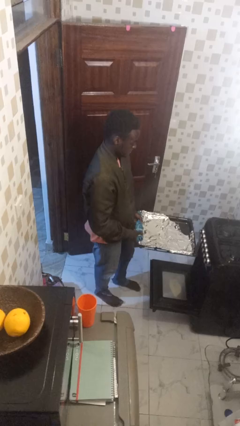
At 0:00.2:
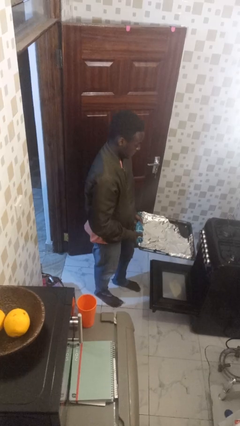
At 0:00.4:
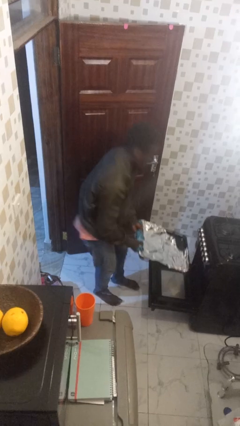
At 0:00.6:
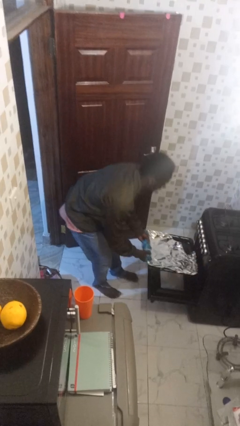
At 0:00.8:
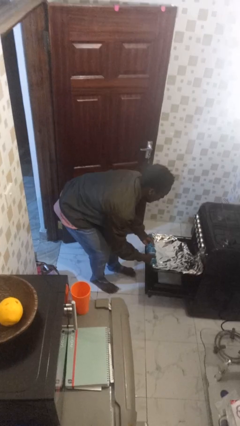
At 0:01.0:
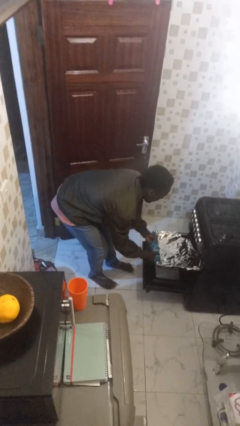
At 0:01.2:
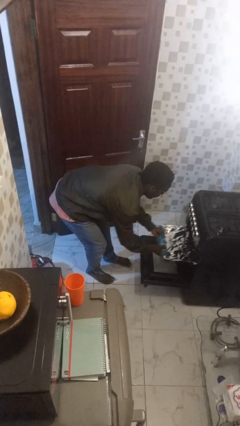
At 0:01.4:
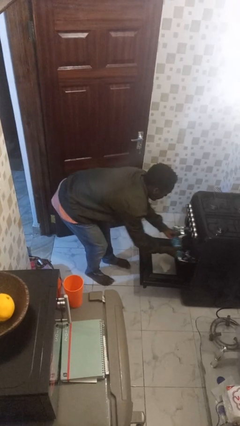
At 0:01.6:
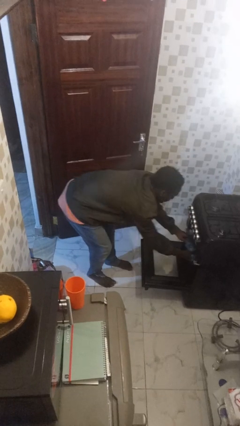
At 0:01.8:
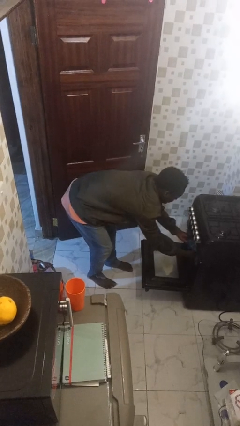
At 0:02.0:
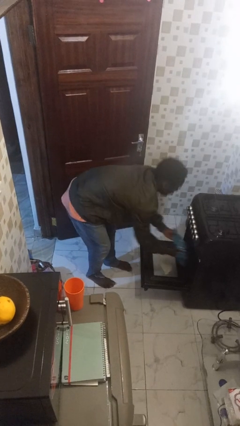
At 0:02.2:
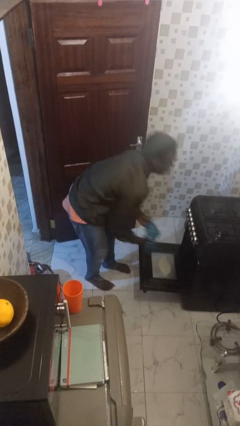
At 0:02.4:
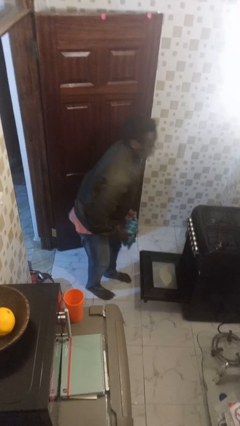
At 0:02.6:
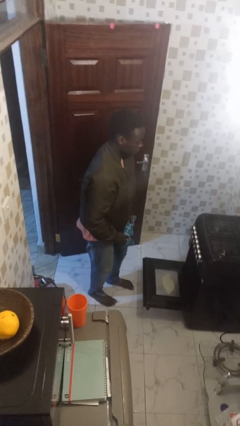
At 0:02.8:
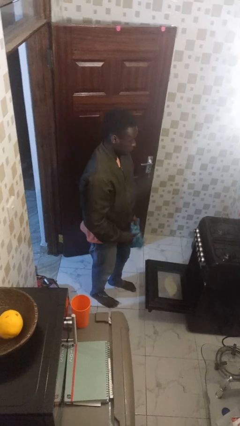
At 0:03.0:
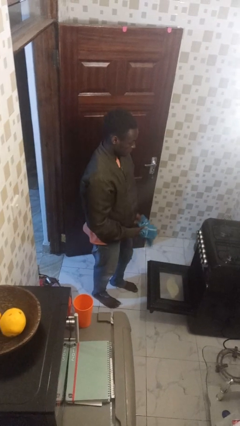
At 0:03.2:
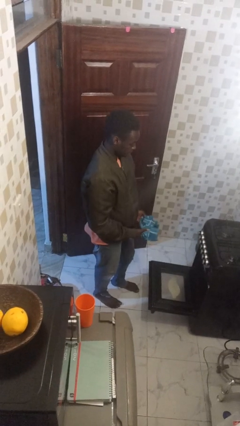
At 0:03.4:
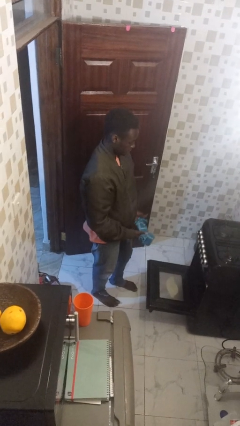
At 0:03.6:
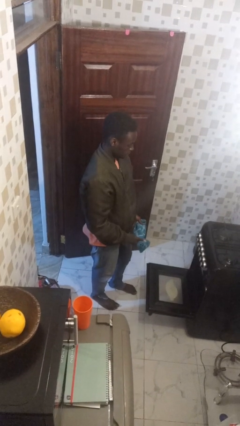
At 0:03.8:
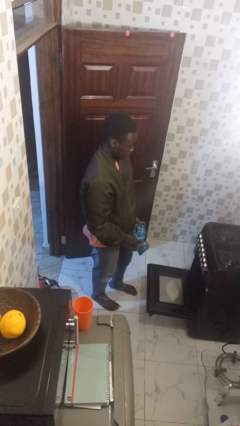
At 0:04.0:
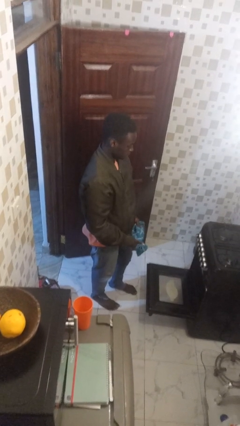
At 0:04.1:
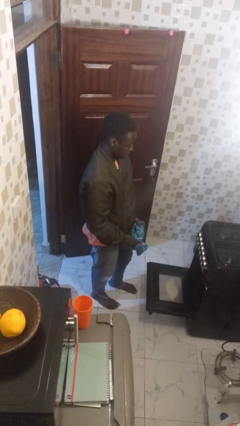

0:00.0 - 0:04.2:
person puts object into oven

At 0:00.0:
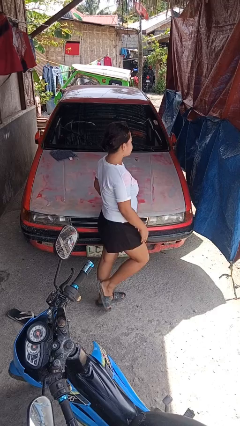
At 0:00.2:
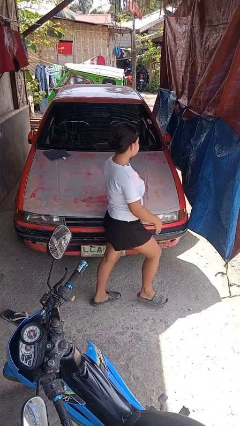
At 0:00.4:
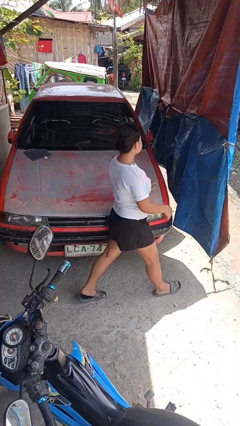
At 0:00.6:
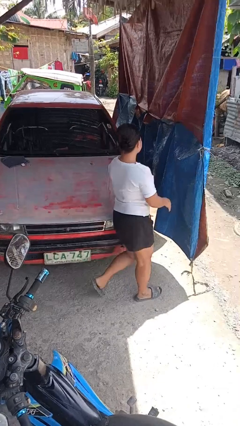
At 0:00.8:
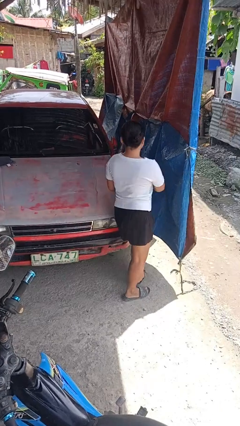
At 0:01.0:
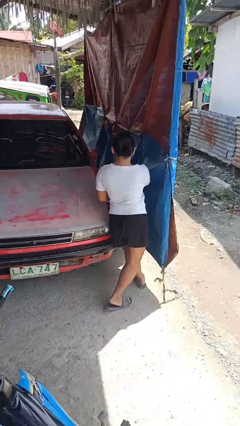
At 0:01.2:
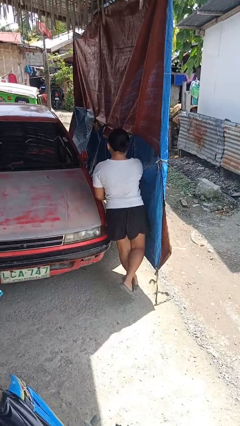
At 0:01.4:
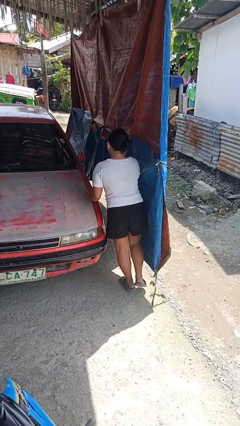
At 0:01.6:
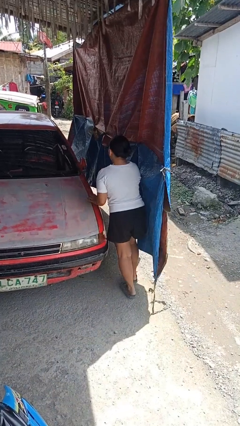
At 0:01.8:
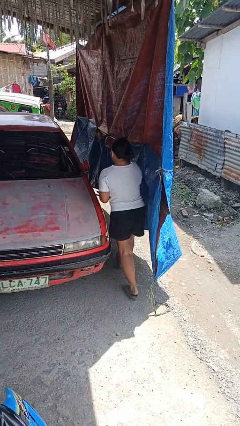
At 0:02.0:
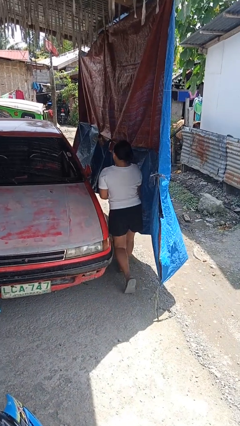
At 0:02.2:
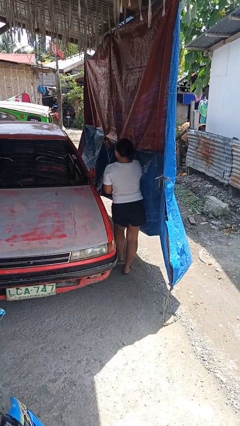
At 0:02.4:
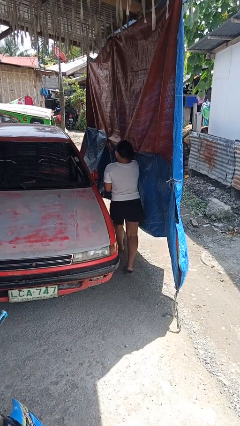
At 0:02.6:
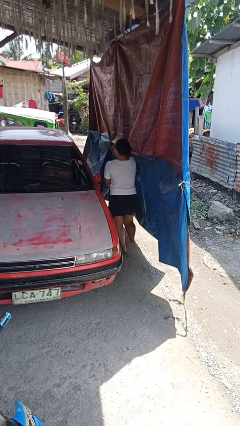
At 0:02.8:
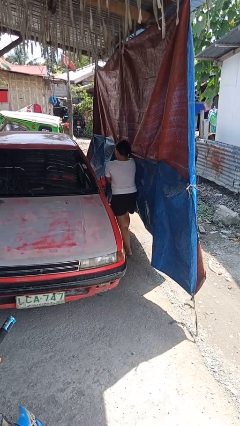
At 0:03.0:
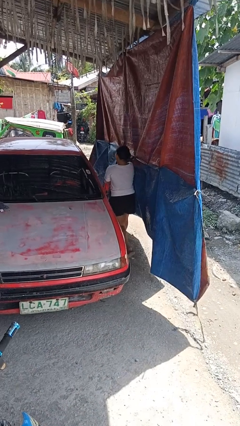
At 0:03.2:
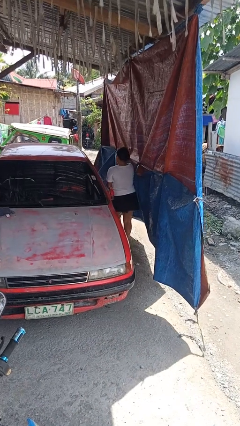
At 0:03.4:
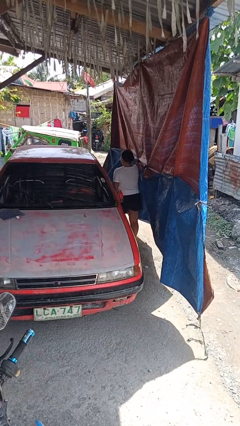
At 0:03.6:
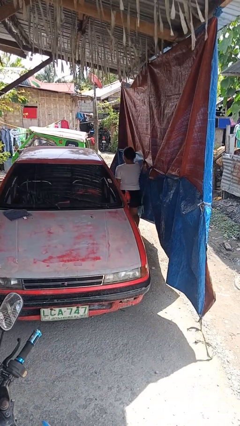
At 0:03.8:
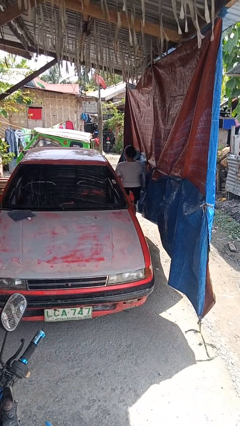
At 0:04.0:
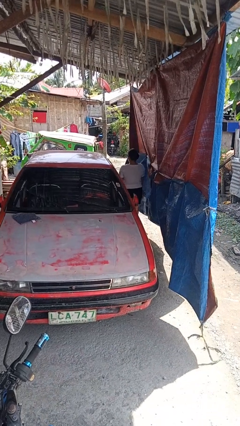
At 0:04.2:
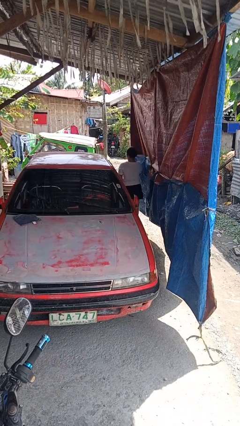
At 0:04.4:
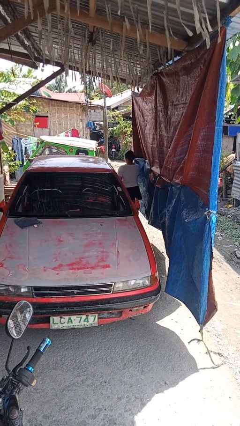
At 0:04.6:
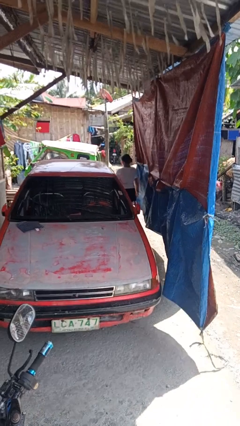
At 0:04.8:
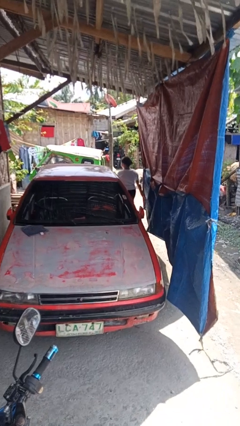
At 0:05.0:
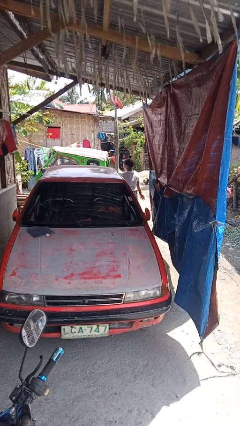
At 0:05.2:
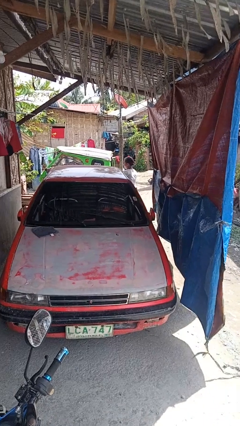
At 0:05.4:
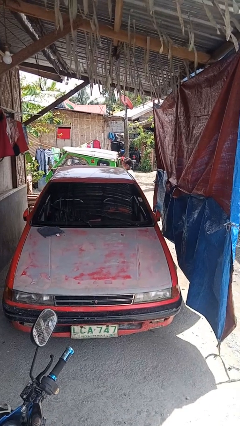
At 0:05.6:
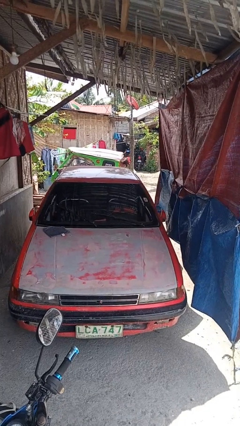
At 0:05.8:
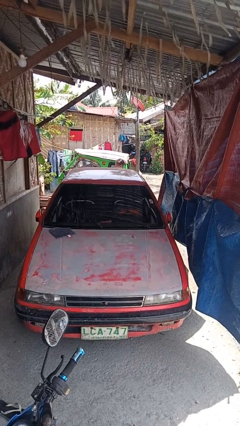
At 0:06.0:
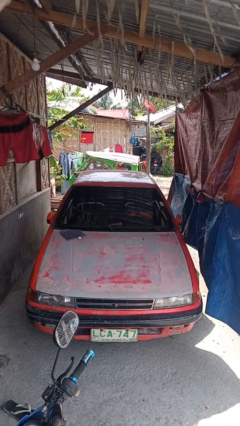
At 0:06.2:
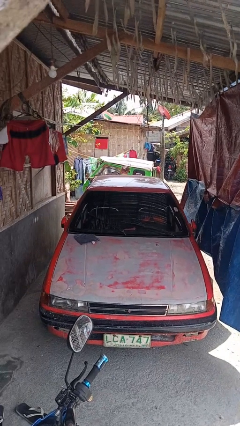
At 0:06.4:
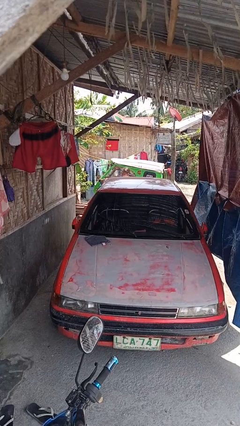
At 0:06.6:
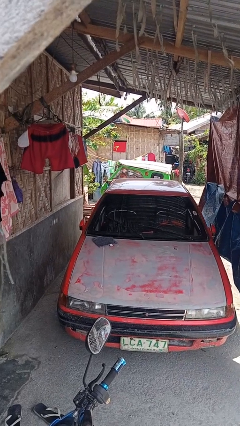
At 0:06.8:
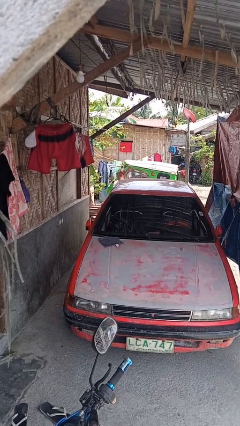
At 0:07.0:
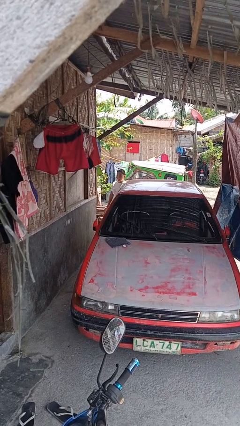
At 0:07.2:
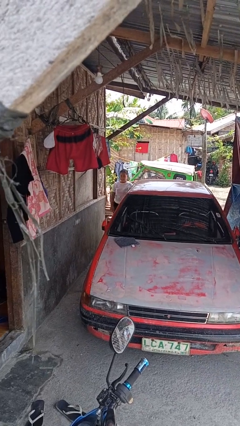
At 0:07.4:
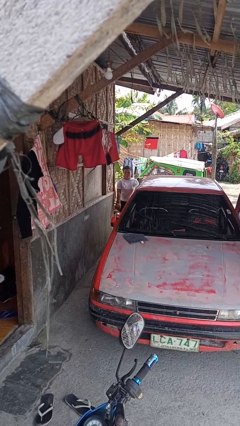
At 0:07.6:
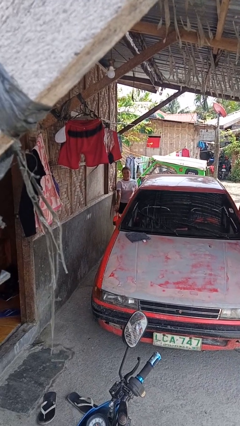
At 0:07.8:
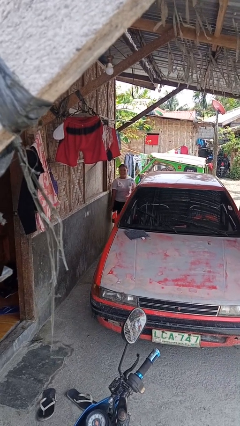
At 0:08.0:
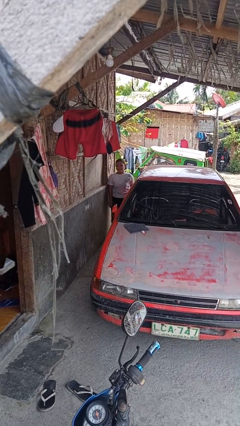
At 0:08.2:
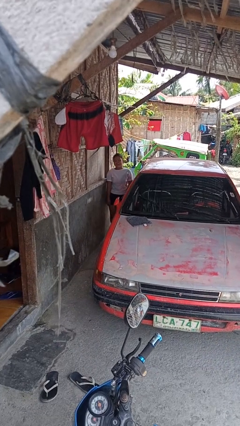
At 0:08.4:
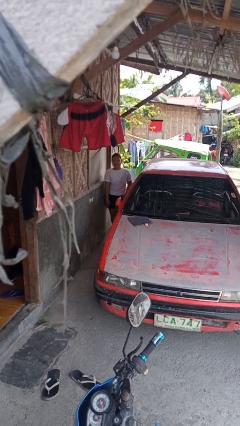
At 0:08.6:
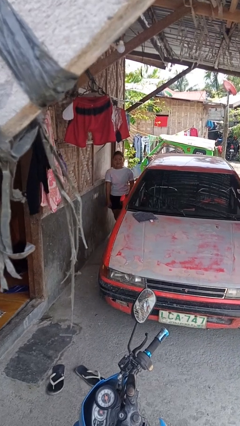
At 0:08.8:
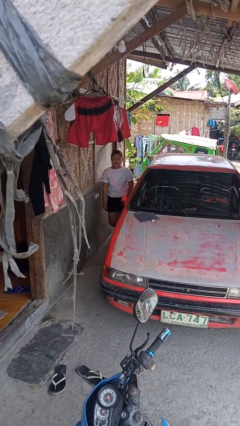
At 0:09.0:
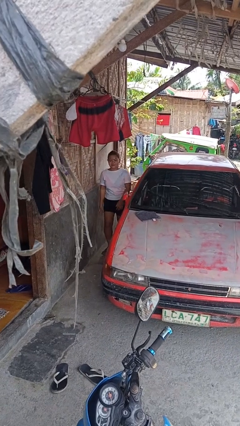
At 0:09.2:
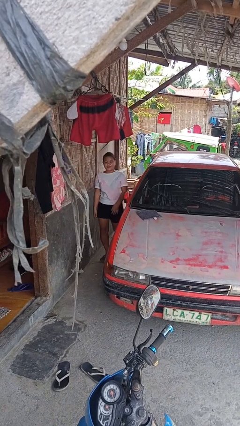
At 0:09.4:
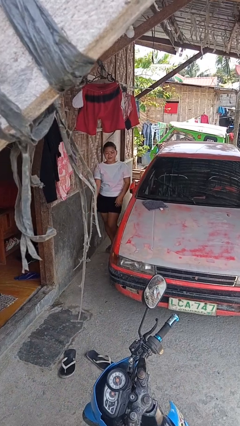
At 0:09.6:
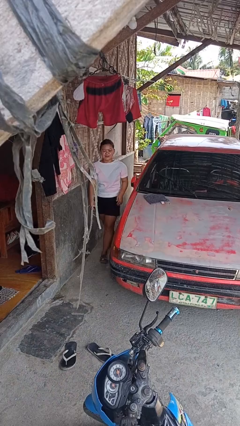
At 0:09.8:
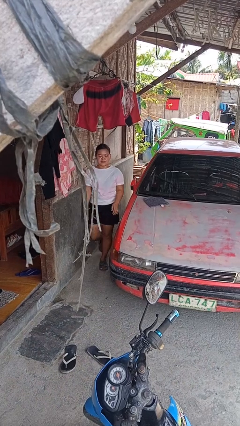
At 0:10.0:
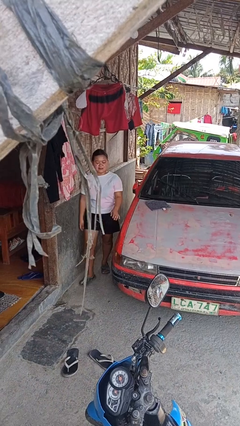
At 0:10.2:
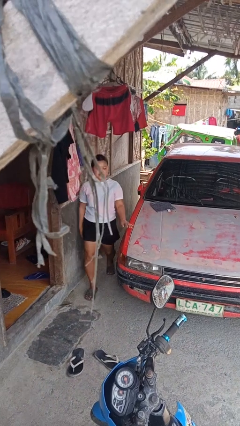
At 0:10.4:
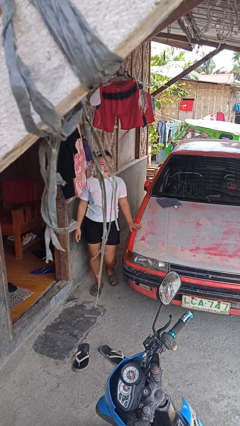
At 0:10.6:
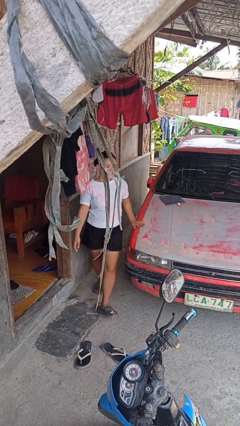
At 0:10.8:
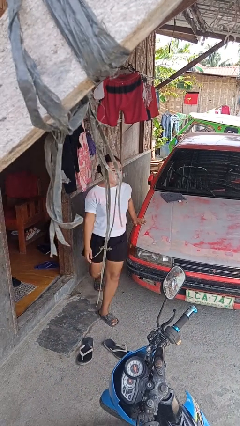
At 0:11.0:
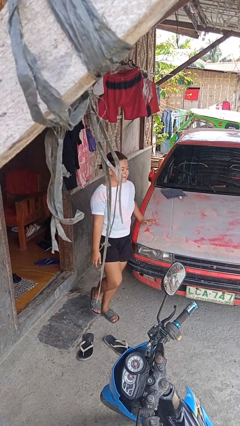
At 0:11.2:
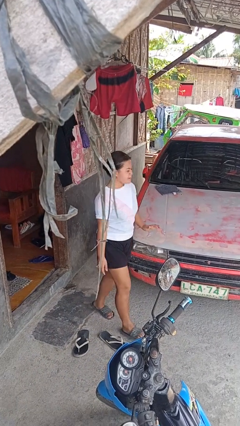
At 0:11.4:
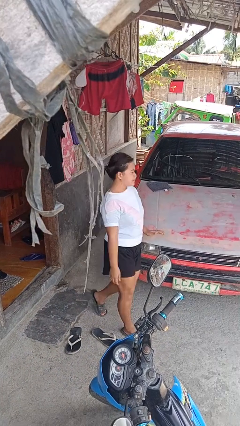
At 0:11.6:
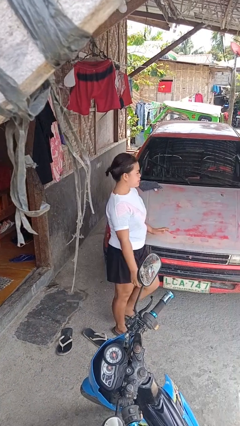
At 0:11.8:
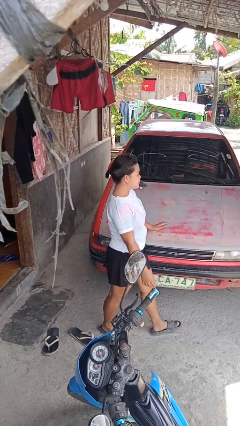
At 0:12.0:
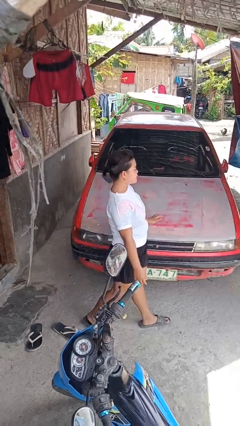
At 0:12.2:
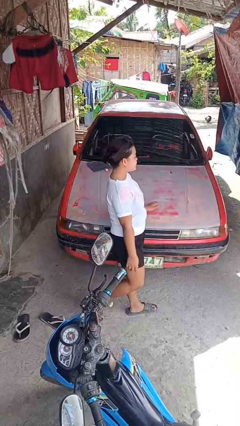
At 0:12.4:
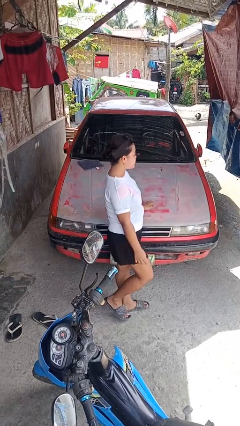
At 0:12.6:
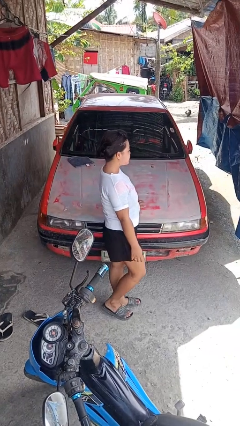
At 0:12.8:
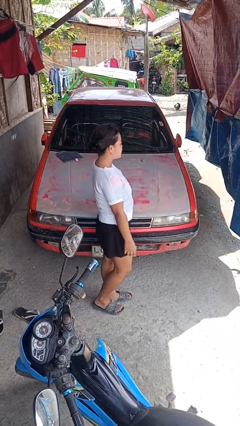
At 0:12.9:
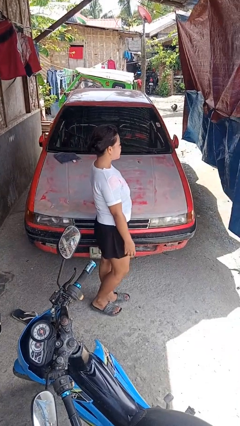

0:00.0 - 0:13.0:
person walks around car

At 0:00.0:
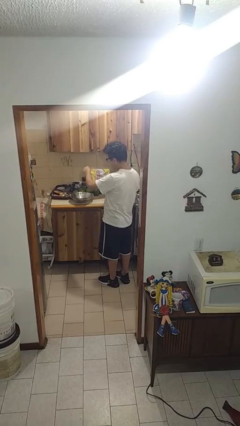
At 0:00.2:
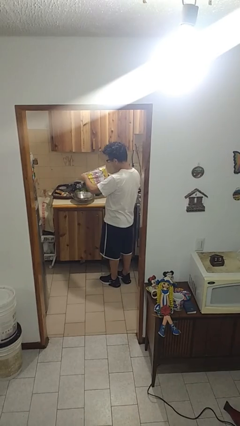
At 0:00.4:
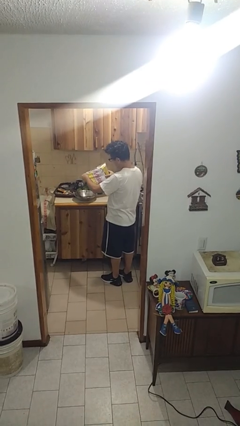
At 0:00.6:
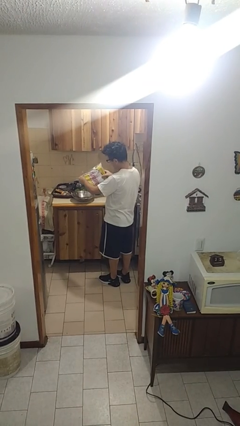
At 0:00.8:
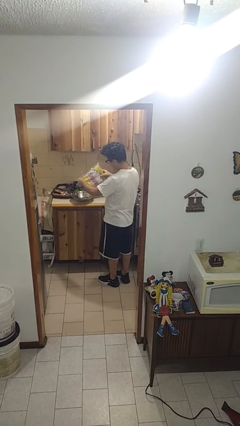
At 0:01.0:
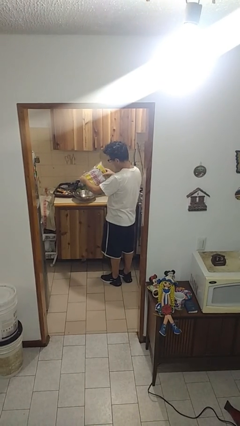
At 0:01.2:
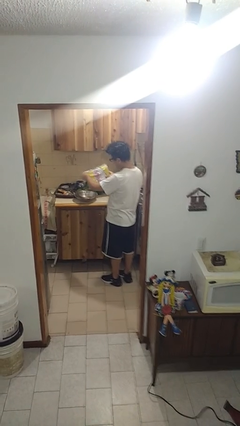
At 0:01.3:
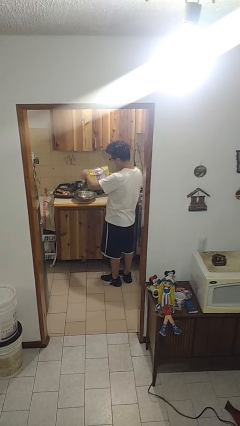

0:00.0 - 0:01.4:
person pours into bowl
